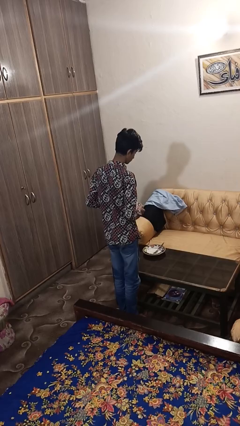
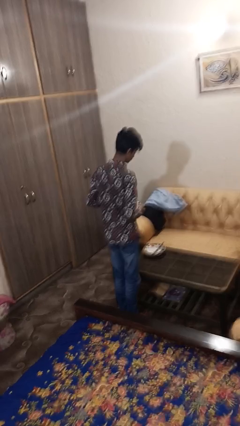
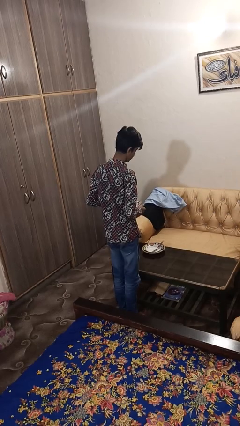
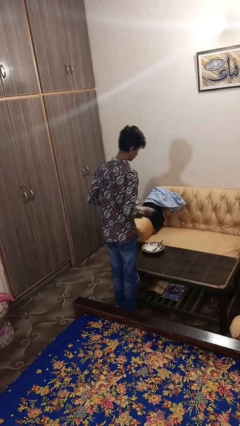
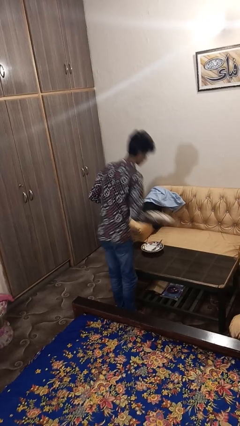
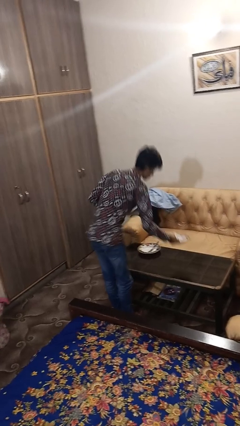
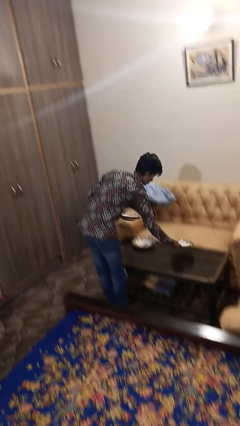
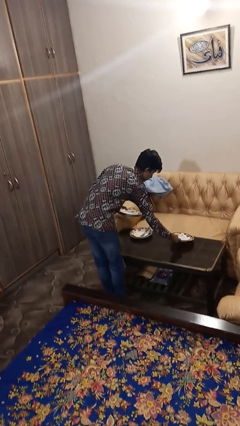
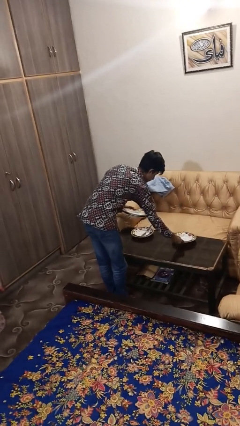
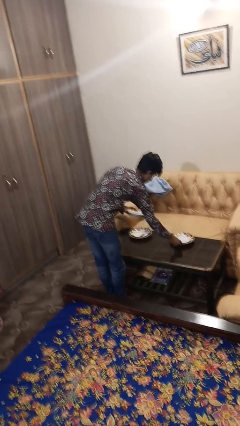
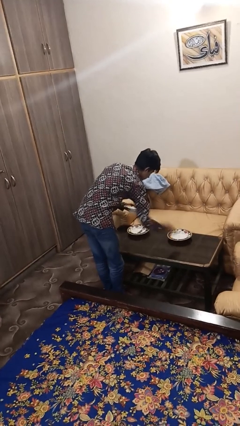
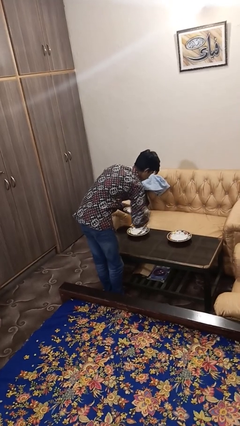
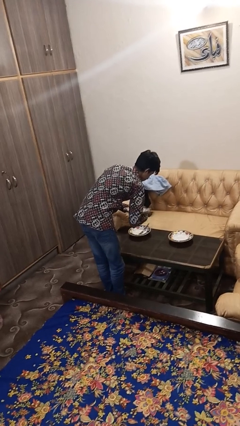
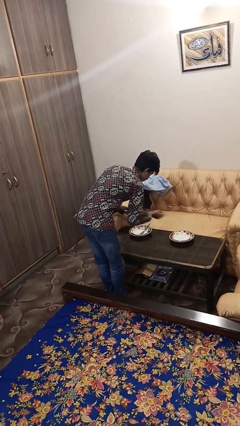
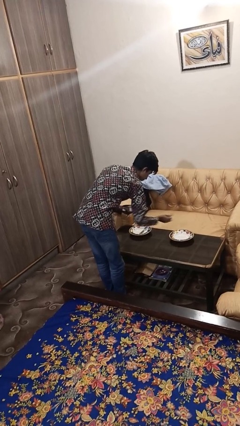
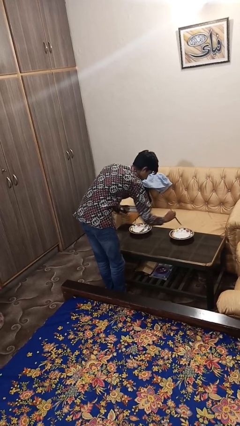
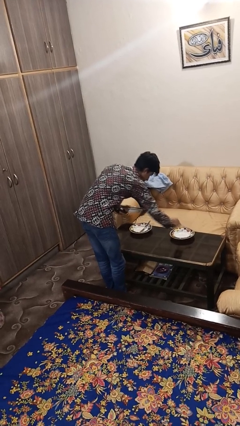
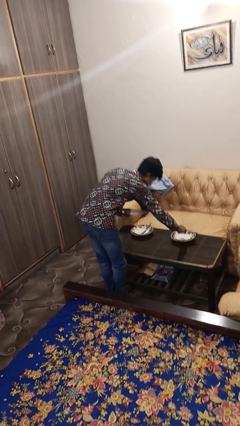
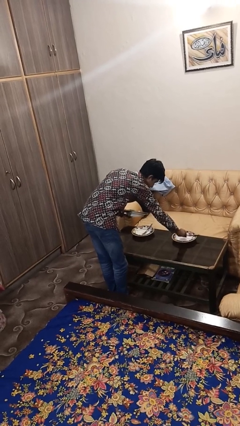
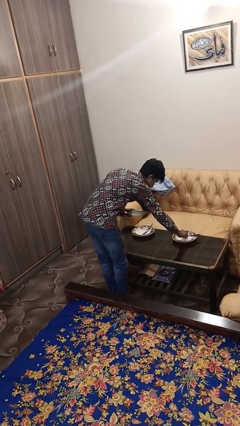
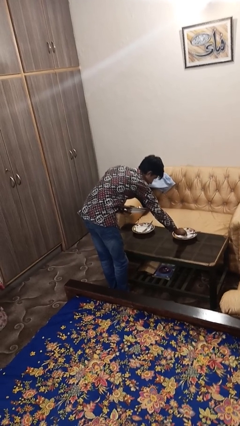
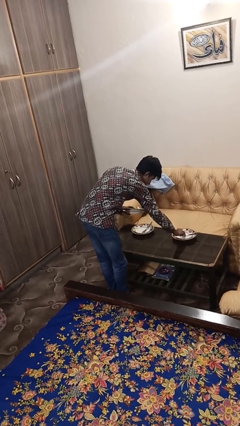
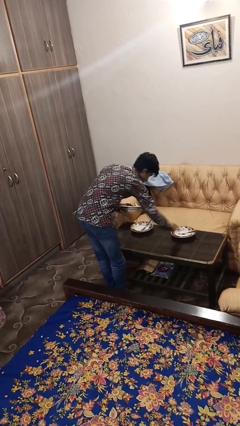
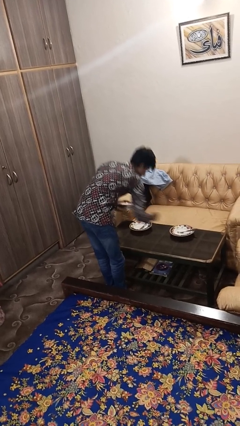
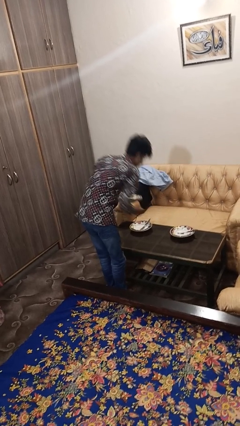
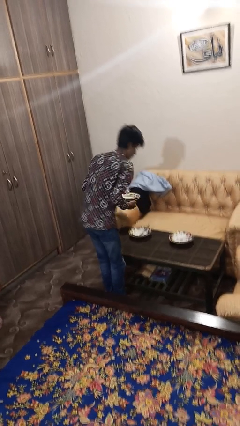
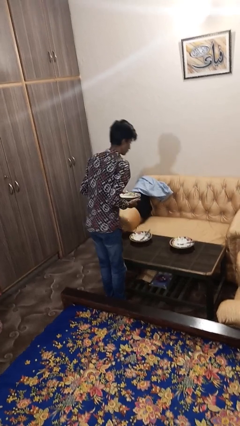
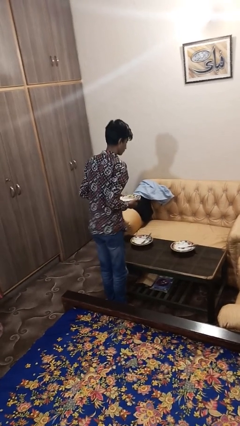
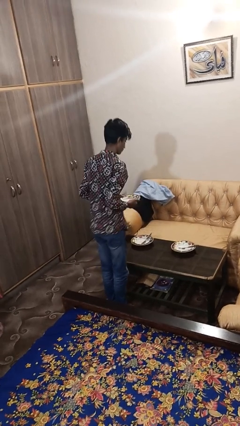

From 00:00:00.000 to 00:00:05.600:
person sets table

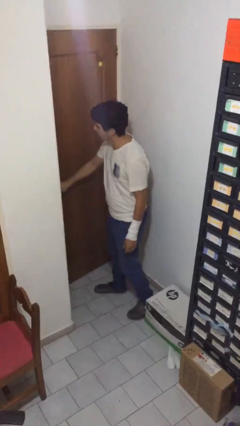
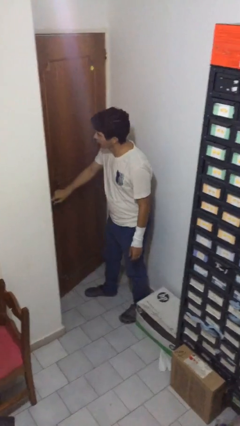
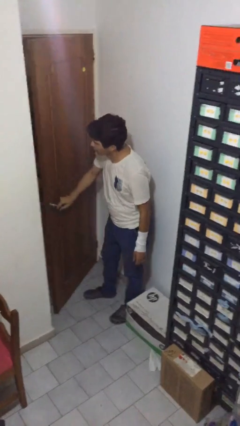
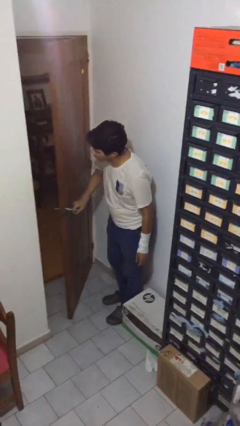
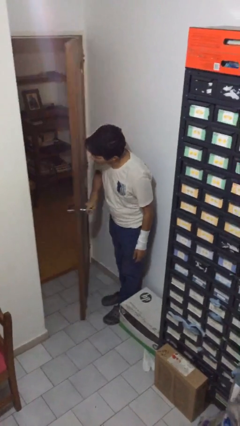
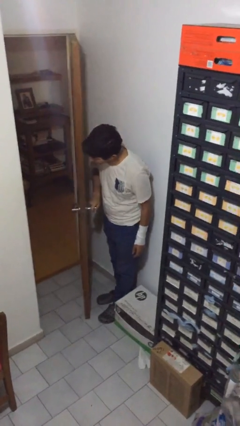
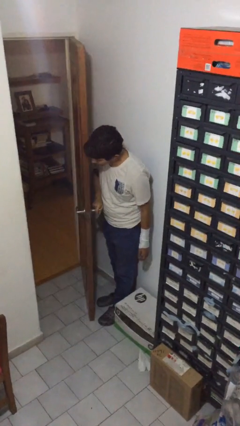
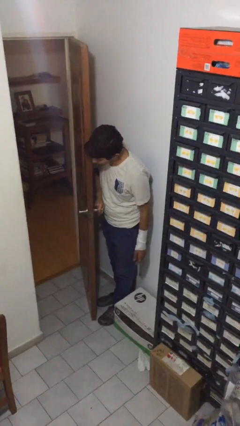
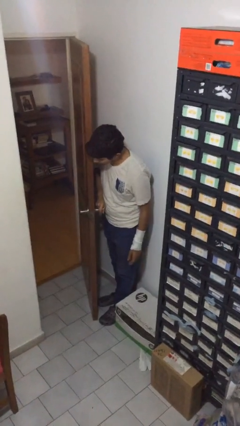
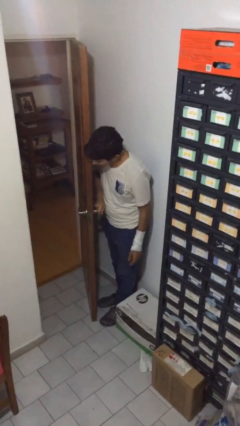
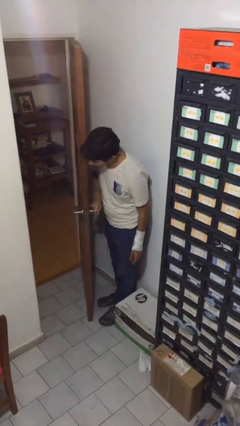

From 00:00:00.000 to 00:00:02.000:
person opens facility door

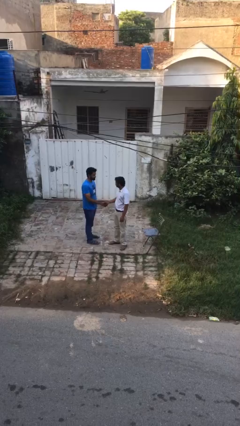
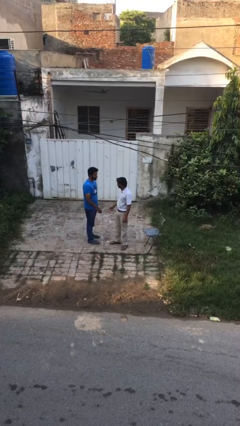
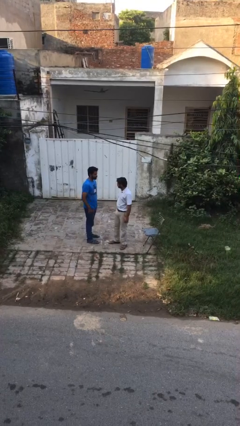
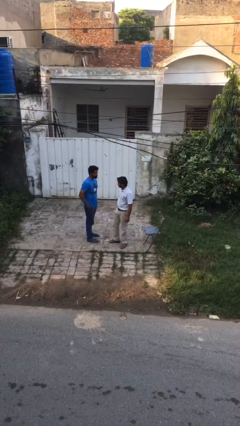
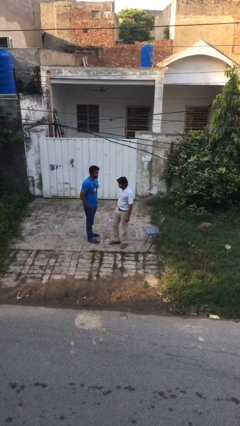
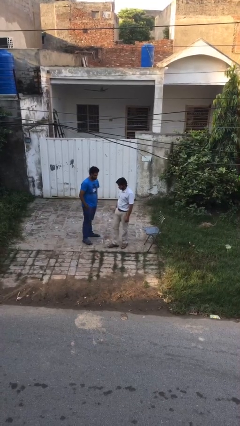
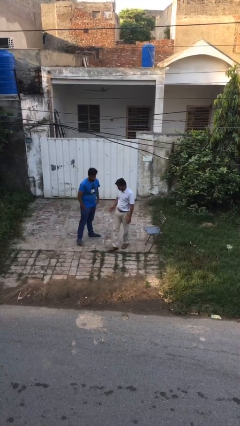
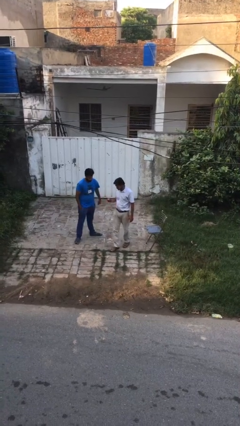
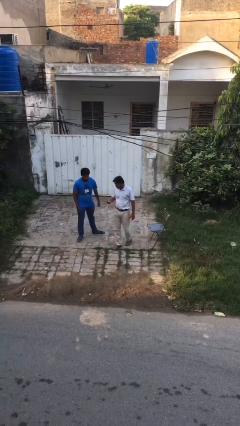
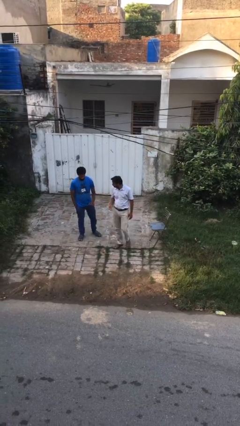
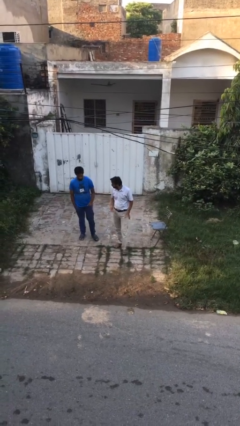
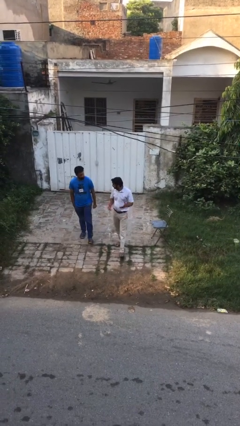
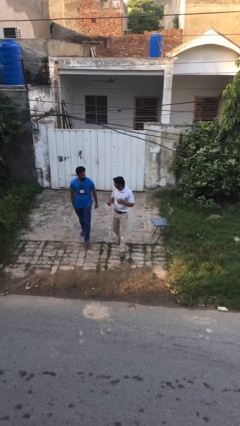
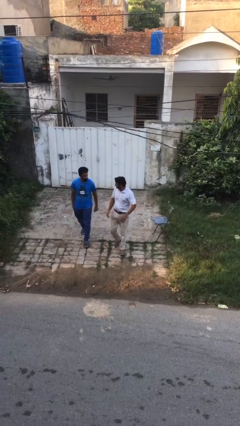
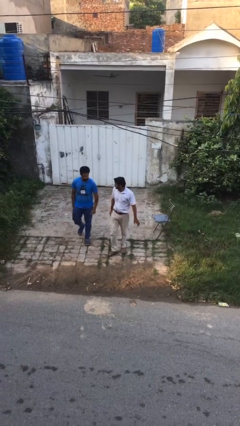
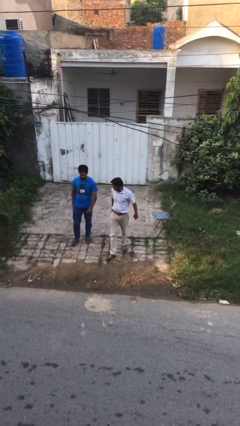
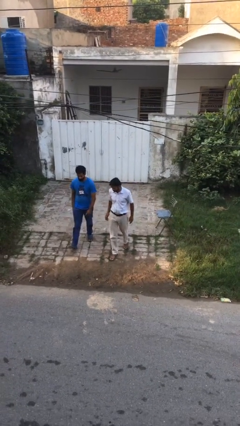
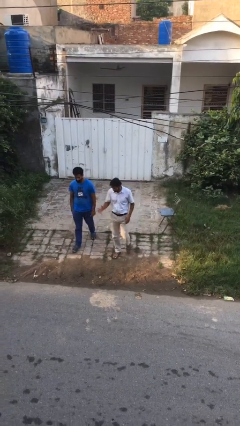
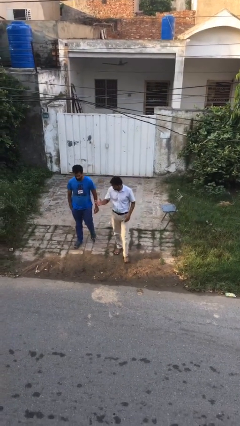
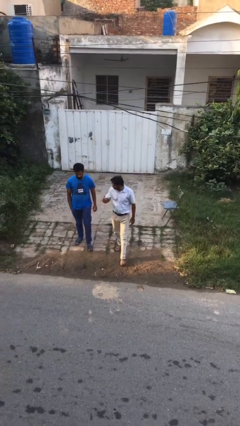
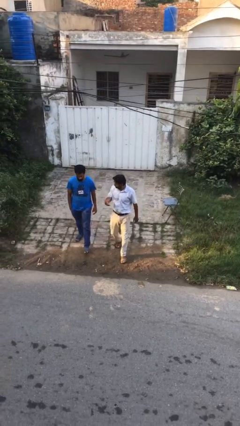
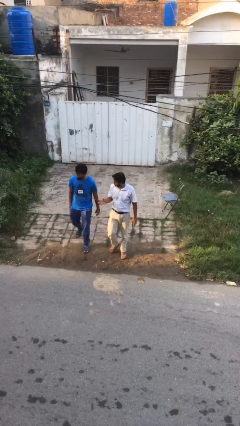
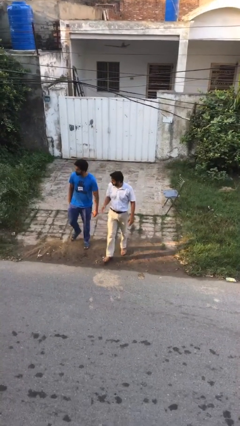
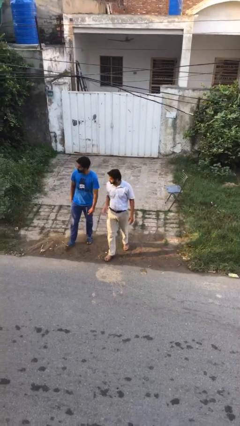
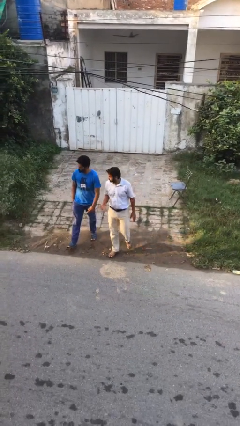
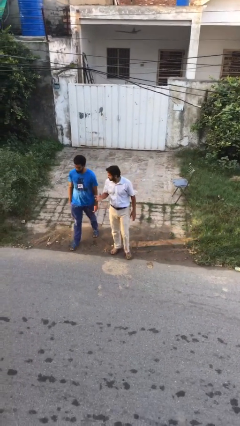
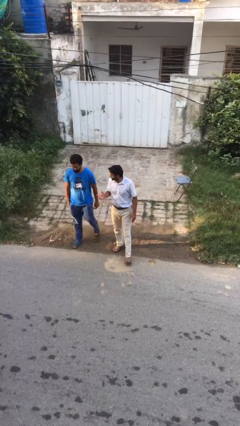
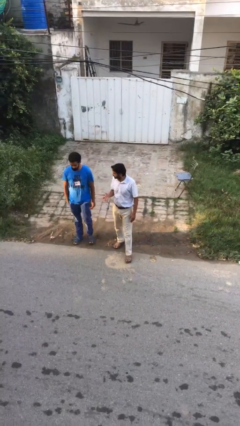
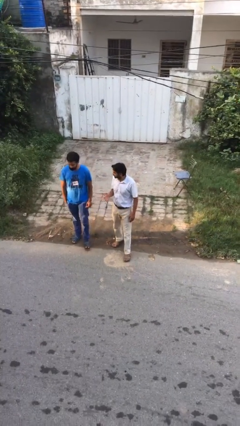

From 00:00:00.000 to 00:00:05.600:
person talks to person

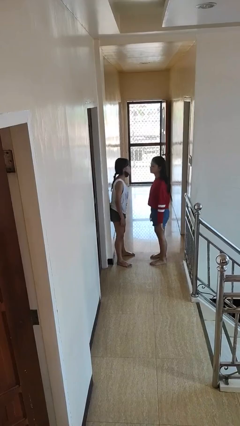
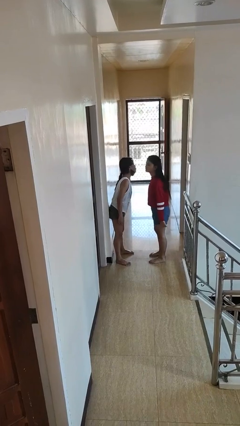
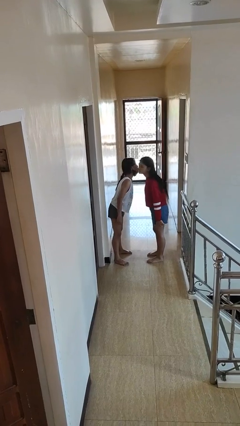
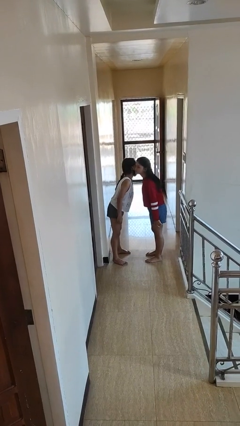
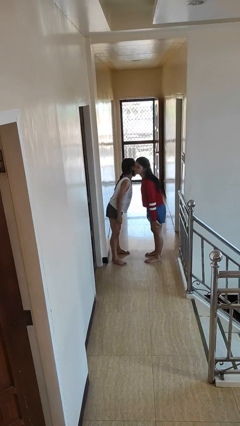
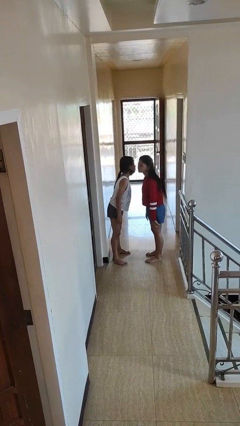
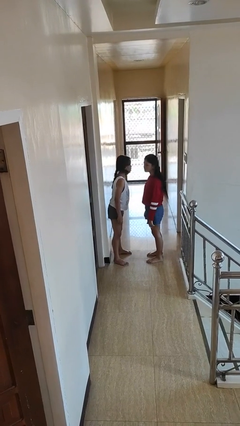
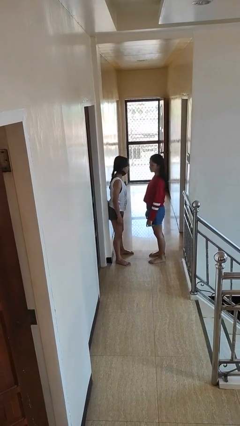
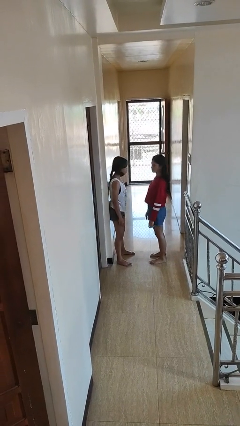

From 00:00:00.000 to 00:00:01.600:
person kisses cheek of person

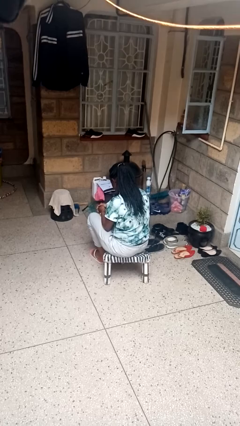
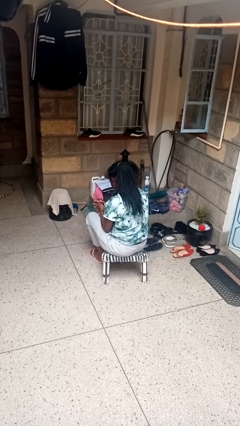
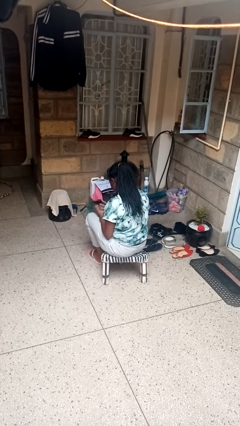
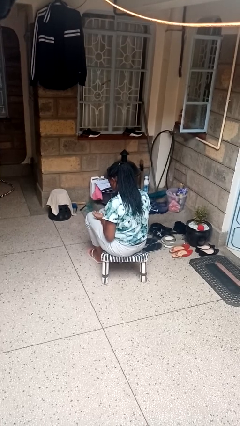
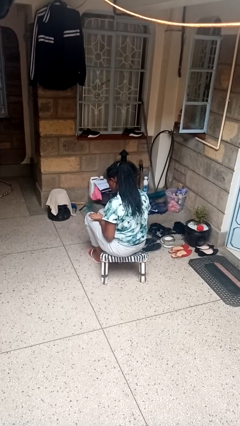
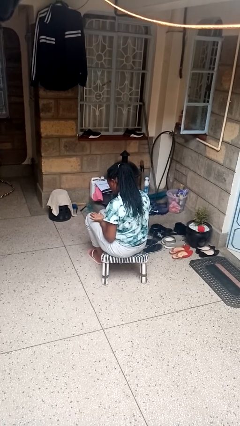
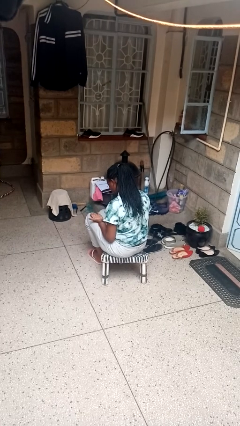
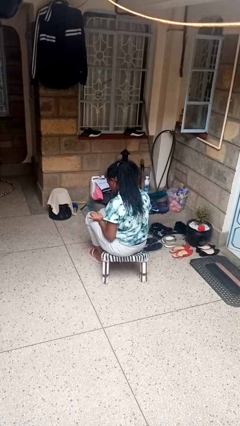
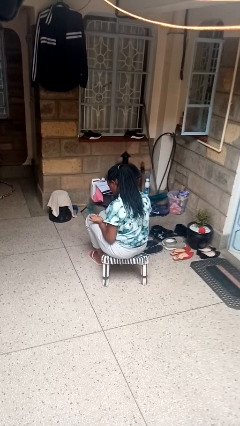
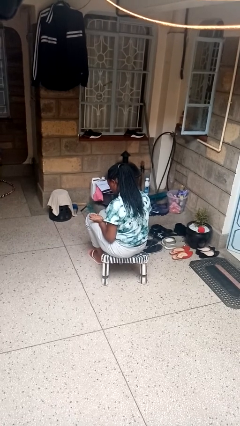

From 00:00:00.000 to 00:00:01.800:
person looks at hands in lap

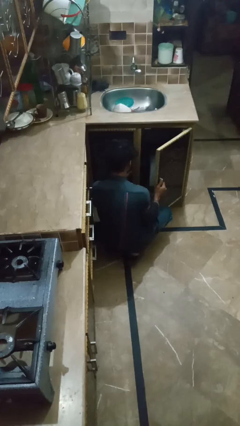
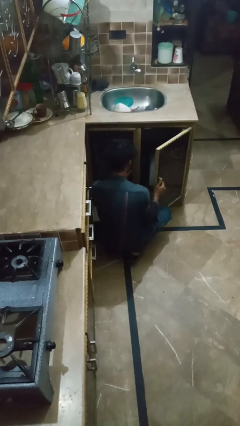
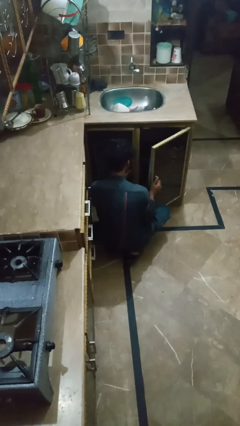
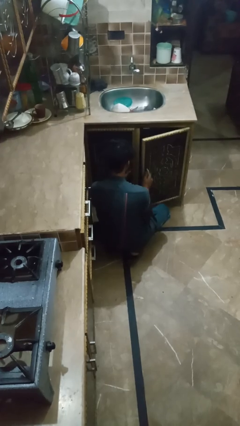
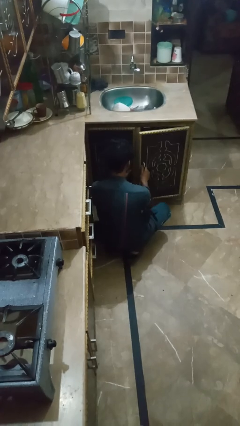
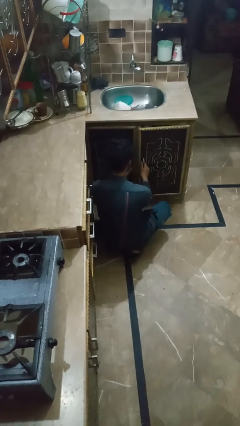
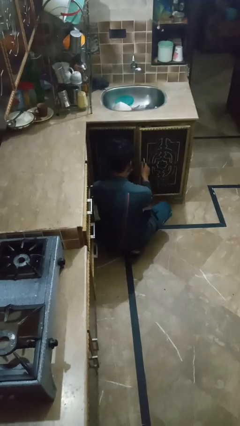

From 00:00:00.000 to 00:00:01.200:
person closes kitchen drawer
